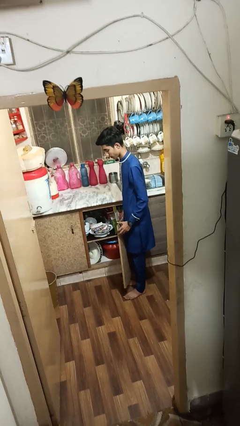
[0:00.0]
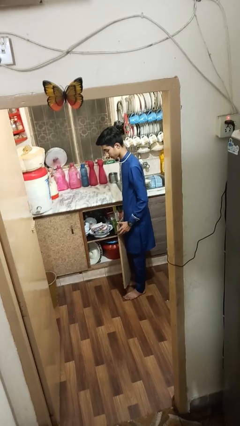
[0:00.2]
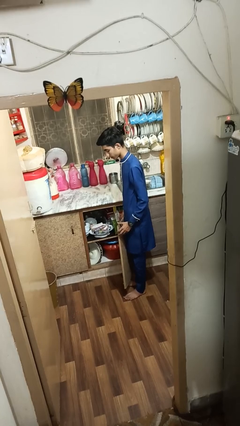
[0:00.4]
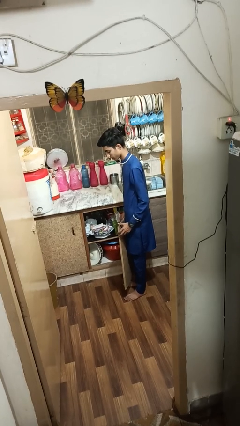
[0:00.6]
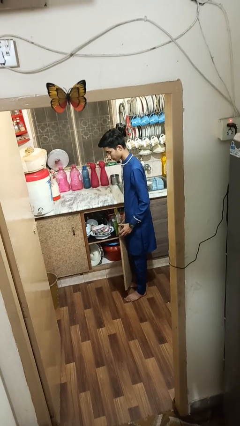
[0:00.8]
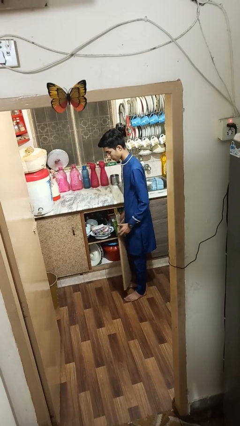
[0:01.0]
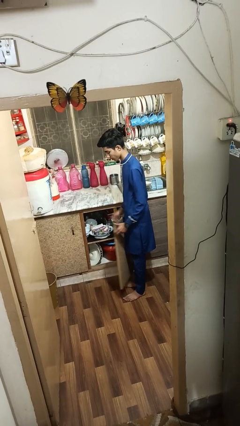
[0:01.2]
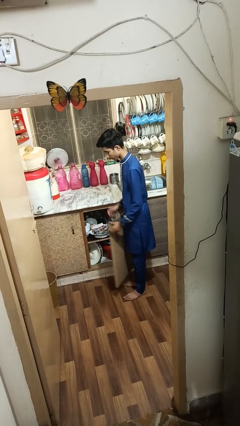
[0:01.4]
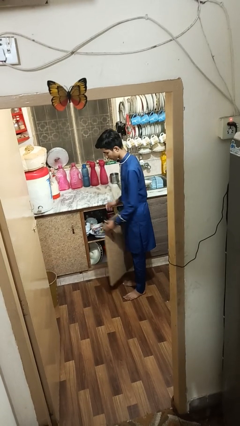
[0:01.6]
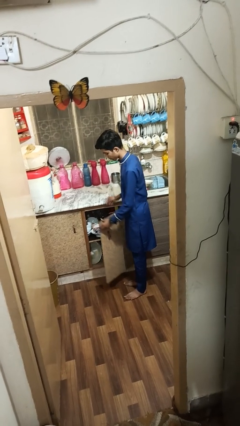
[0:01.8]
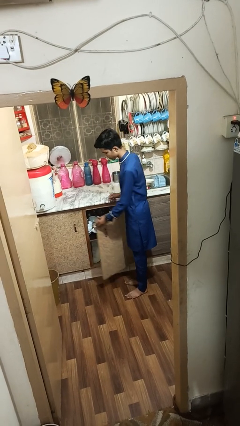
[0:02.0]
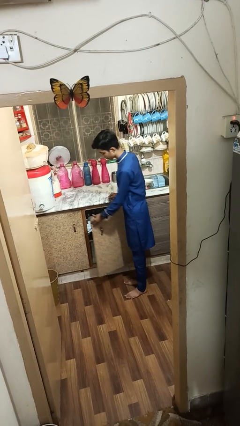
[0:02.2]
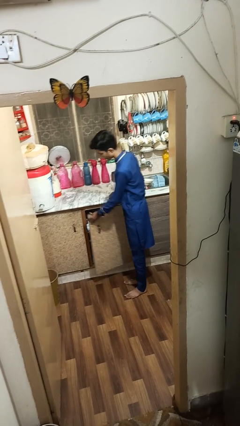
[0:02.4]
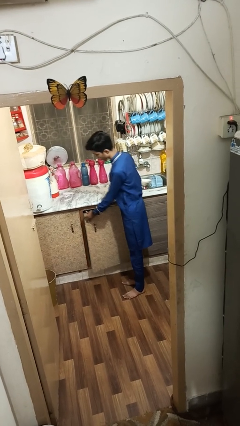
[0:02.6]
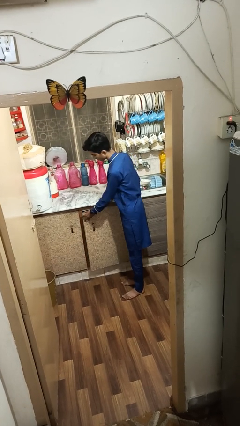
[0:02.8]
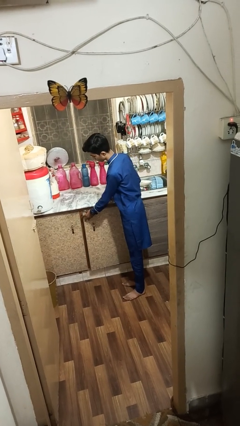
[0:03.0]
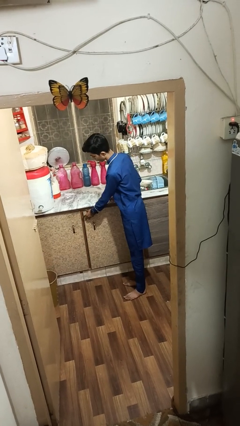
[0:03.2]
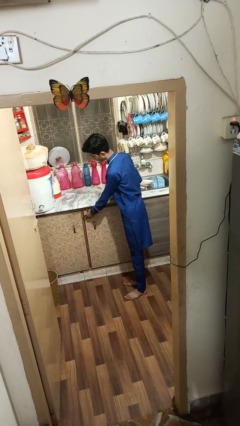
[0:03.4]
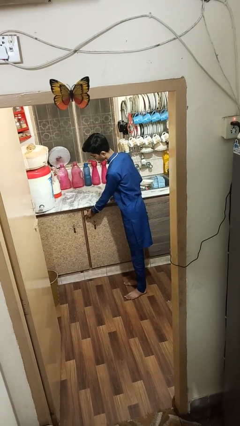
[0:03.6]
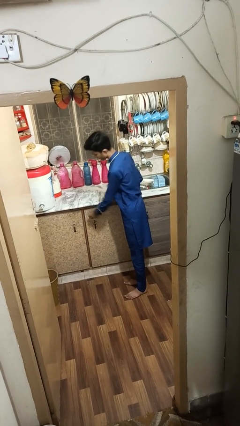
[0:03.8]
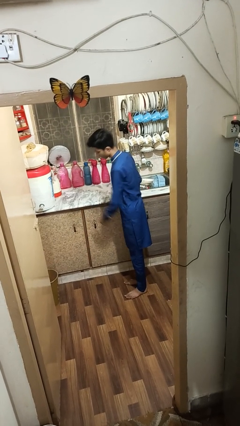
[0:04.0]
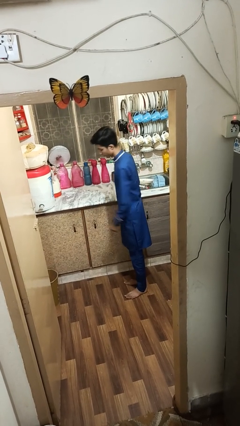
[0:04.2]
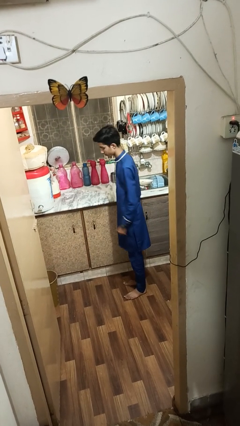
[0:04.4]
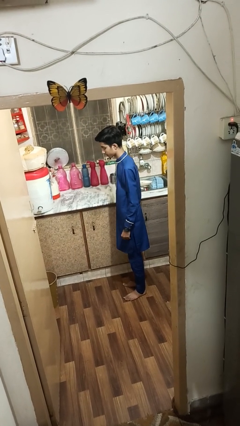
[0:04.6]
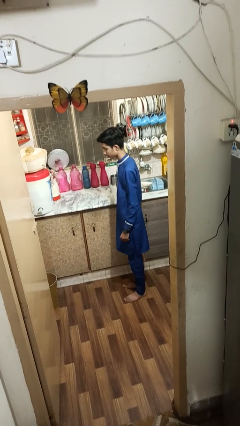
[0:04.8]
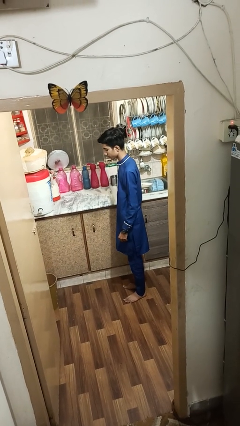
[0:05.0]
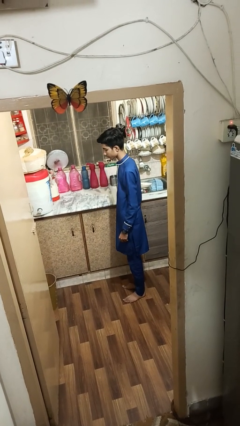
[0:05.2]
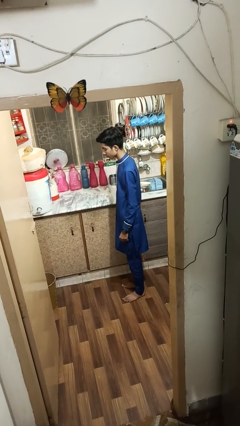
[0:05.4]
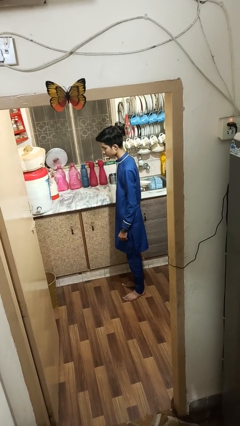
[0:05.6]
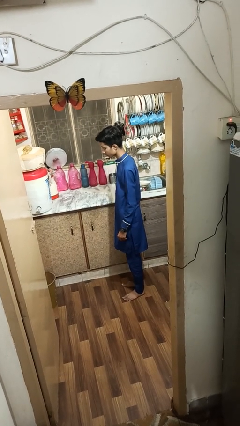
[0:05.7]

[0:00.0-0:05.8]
person closes cabinet

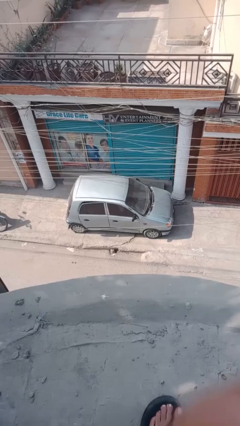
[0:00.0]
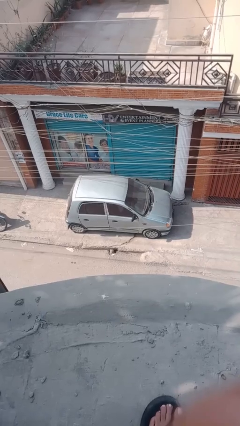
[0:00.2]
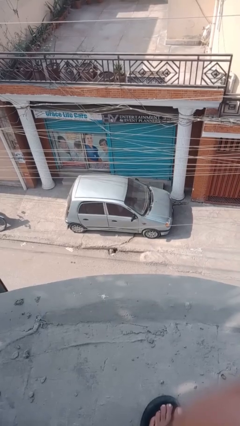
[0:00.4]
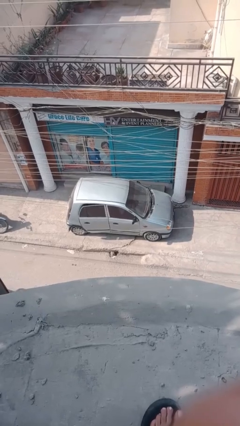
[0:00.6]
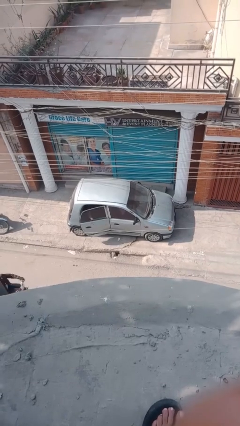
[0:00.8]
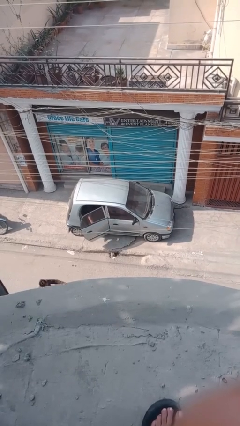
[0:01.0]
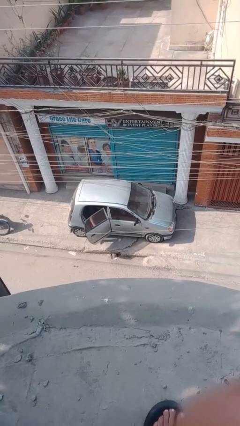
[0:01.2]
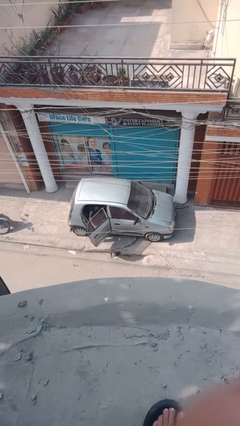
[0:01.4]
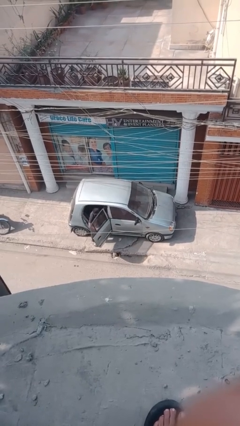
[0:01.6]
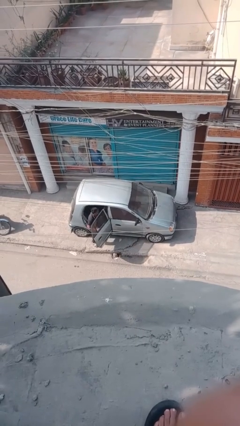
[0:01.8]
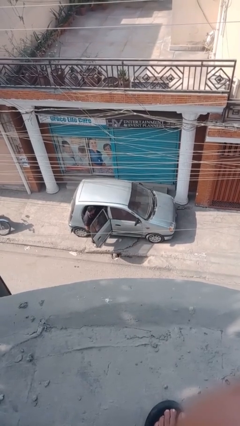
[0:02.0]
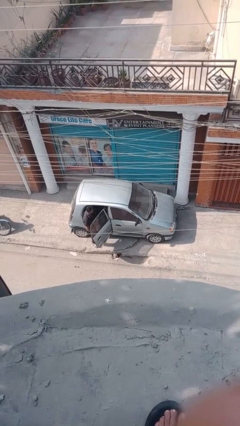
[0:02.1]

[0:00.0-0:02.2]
car drops off person

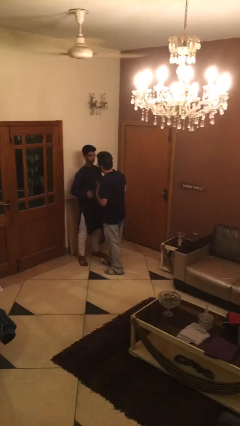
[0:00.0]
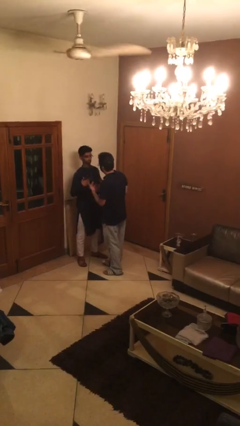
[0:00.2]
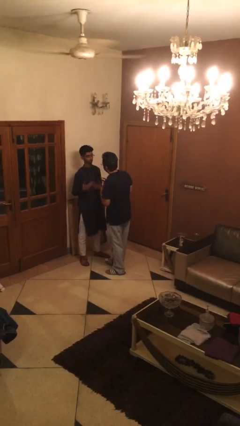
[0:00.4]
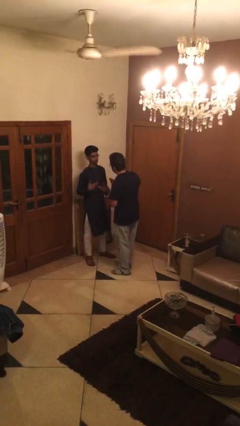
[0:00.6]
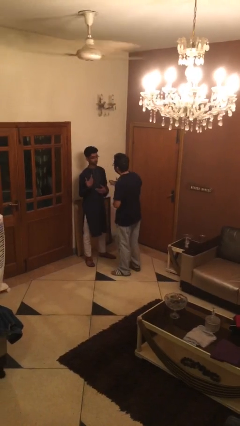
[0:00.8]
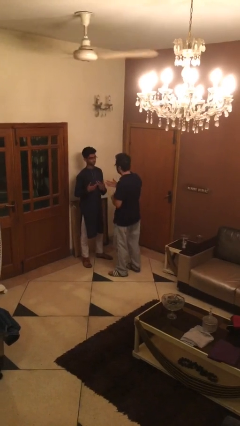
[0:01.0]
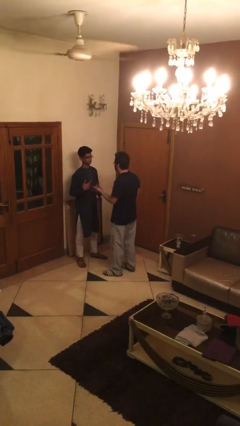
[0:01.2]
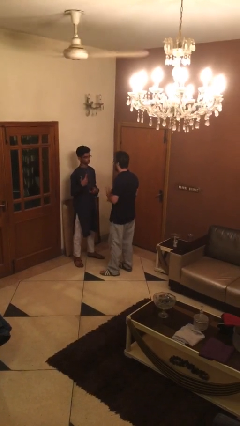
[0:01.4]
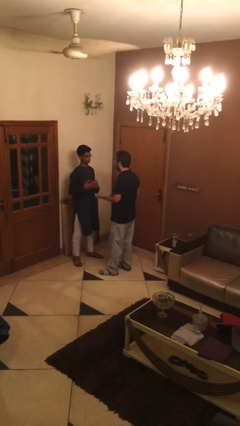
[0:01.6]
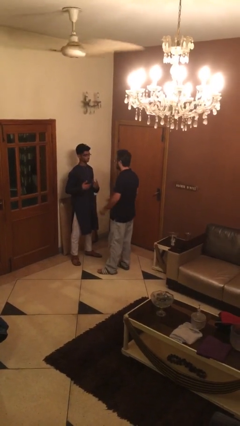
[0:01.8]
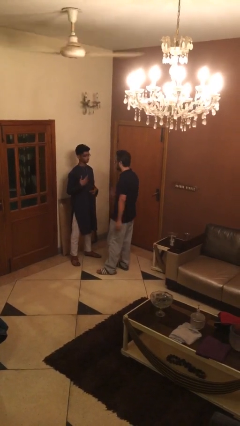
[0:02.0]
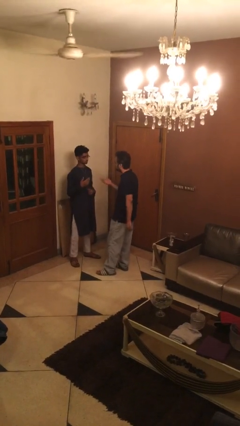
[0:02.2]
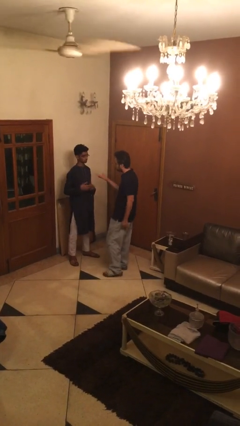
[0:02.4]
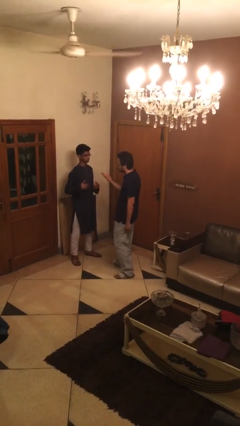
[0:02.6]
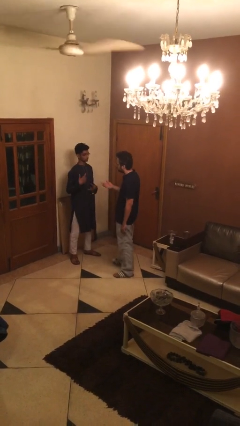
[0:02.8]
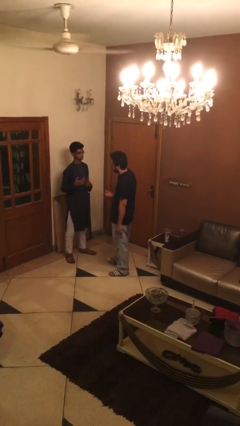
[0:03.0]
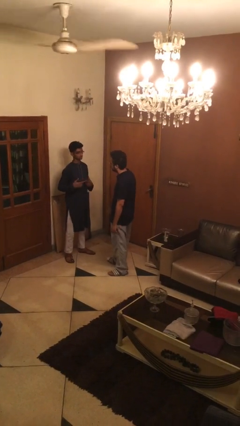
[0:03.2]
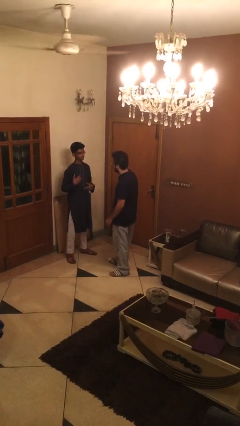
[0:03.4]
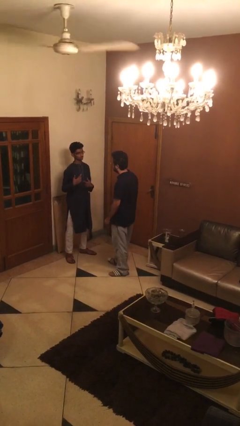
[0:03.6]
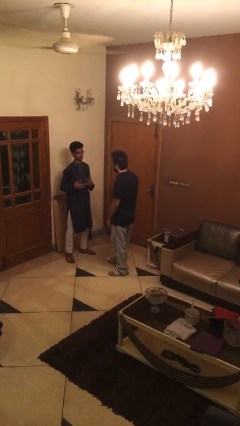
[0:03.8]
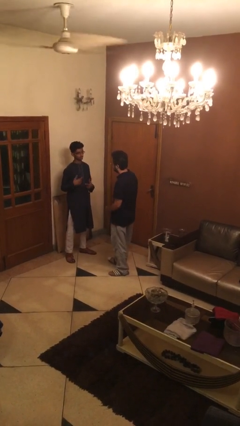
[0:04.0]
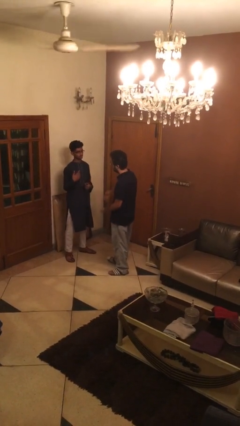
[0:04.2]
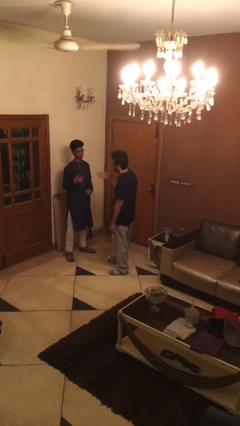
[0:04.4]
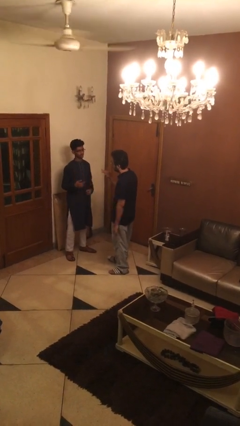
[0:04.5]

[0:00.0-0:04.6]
person talks to person

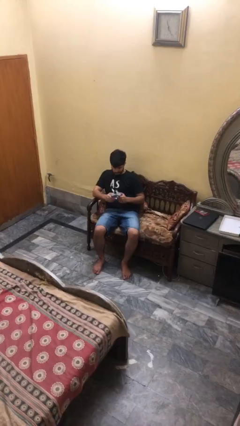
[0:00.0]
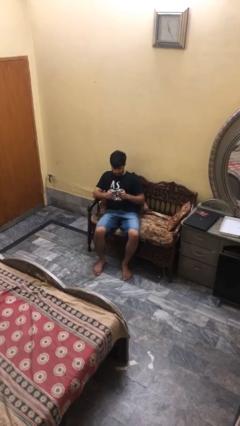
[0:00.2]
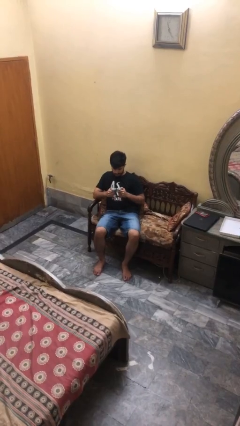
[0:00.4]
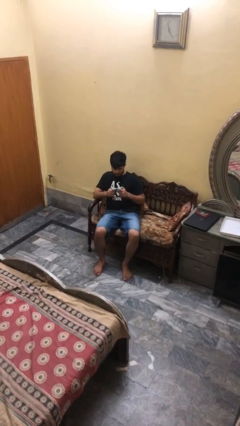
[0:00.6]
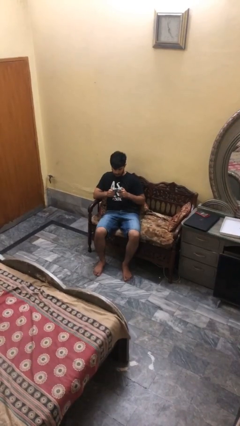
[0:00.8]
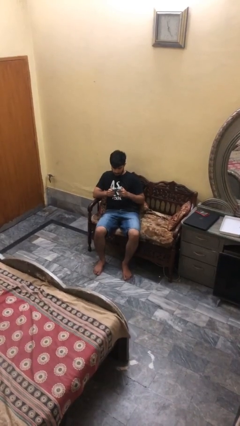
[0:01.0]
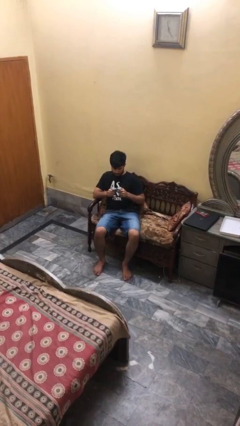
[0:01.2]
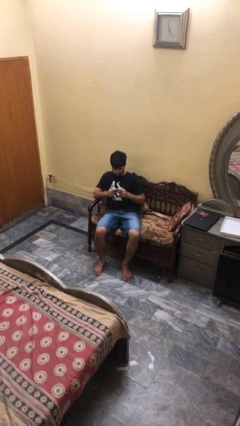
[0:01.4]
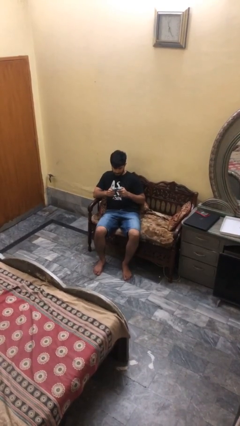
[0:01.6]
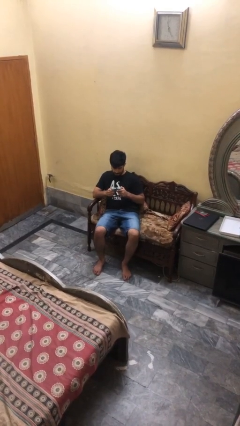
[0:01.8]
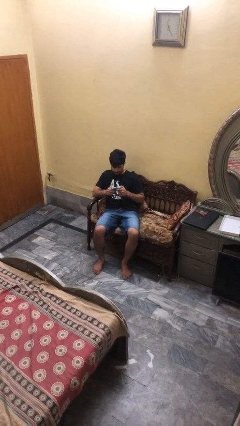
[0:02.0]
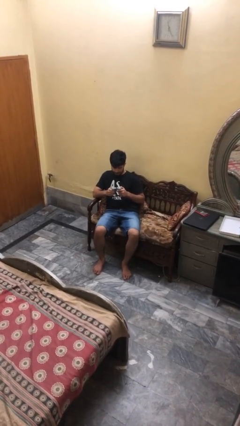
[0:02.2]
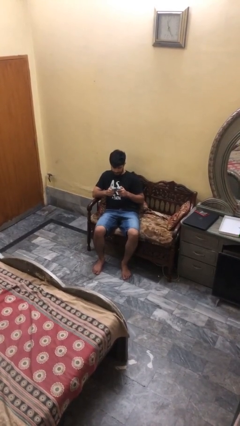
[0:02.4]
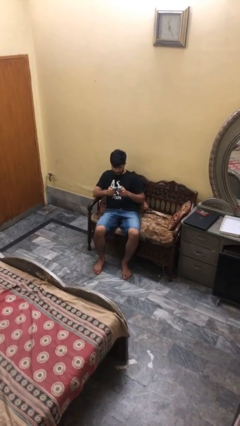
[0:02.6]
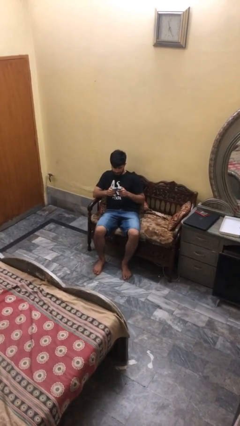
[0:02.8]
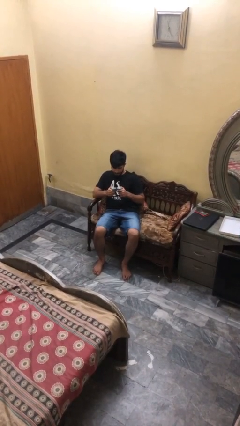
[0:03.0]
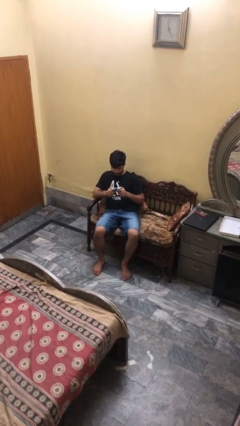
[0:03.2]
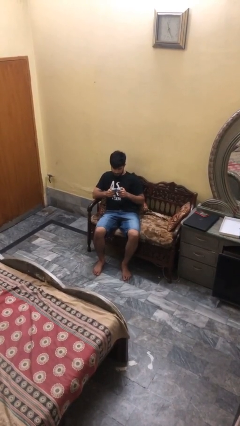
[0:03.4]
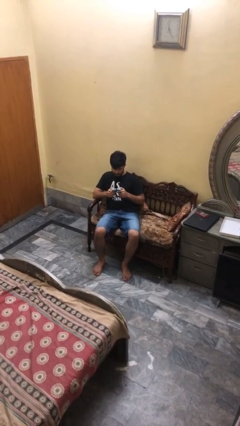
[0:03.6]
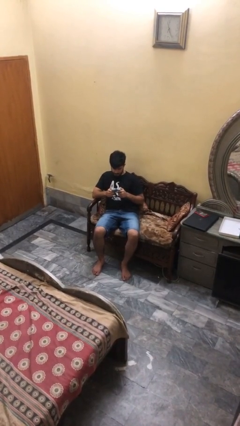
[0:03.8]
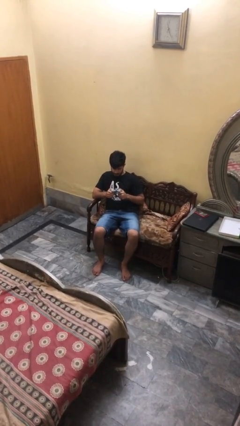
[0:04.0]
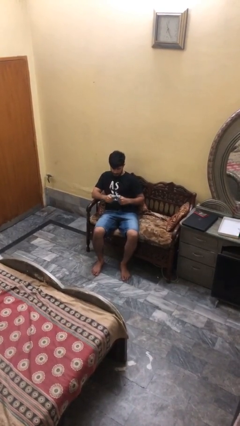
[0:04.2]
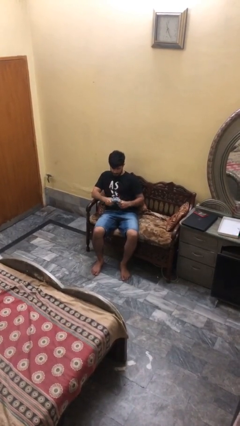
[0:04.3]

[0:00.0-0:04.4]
person interacts with handheld game

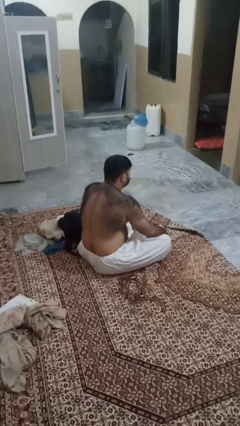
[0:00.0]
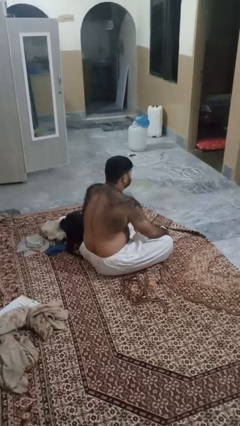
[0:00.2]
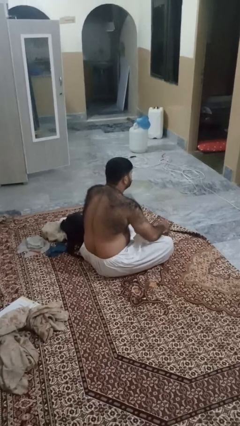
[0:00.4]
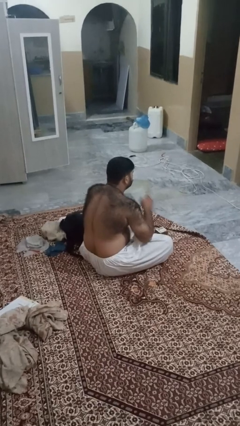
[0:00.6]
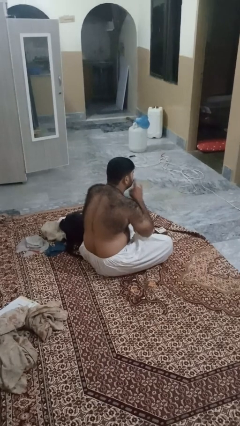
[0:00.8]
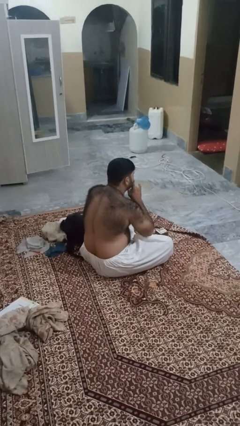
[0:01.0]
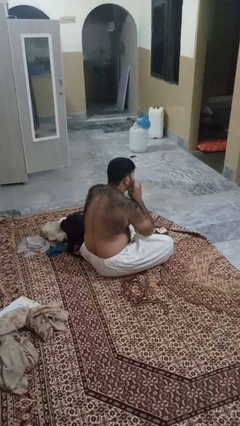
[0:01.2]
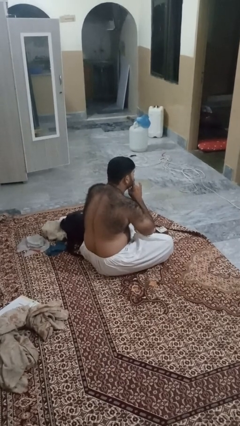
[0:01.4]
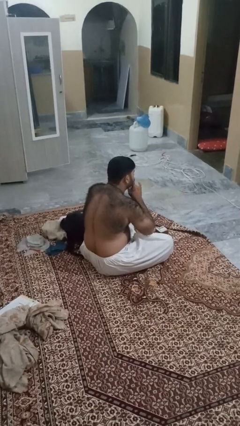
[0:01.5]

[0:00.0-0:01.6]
person gestures be quiet
